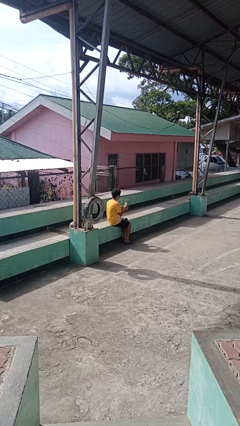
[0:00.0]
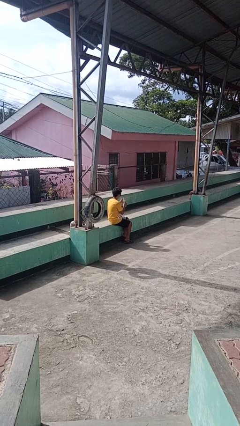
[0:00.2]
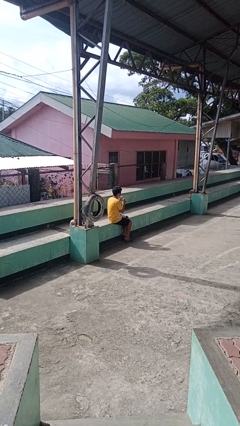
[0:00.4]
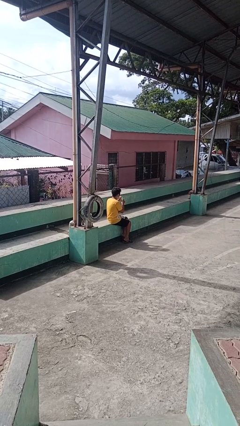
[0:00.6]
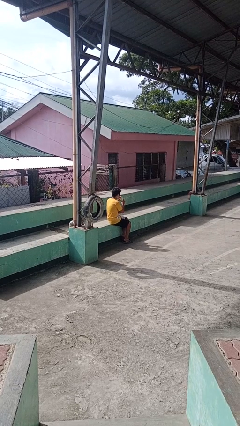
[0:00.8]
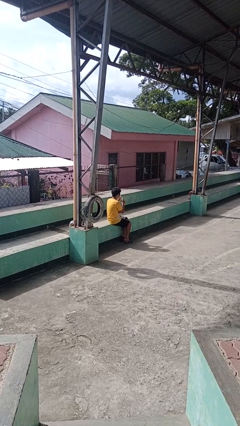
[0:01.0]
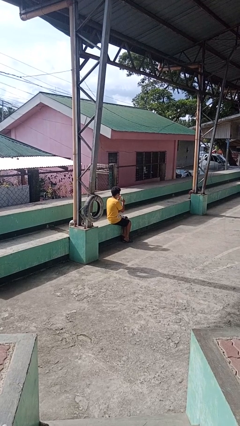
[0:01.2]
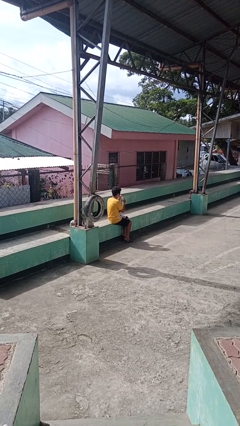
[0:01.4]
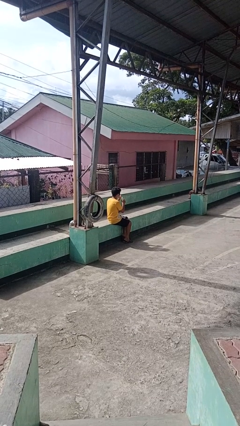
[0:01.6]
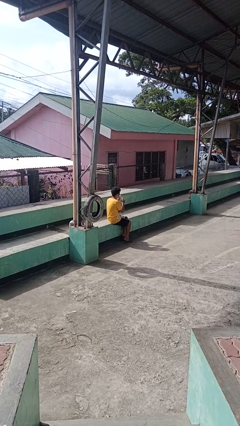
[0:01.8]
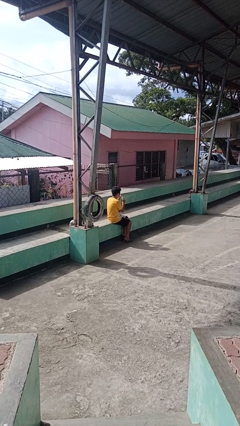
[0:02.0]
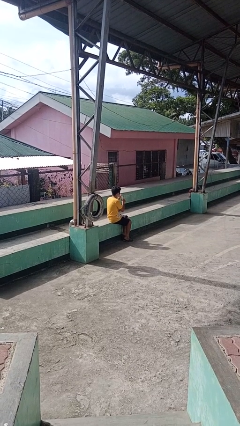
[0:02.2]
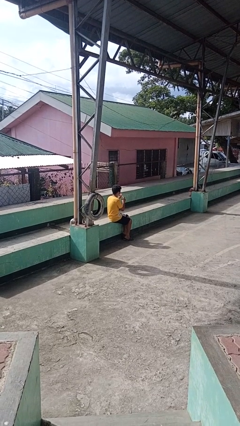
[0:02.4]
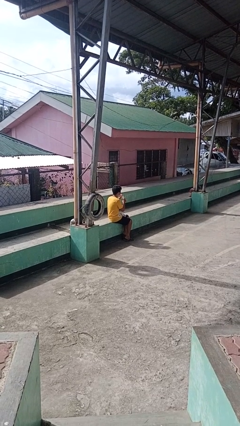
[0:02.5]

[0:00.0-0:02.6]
person drinks from straw

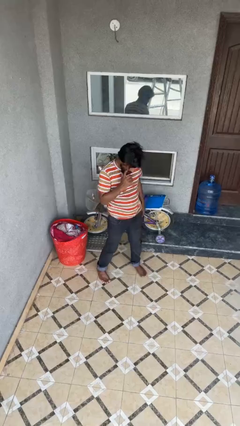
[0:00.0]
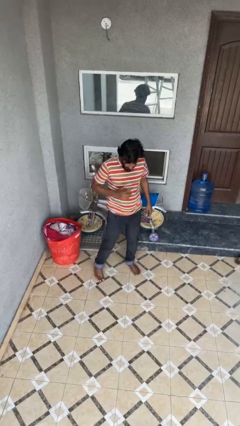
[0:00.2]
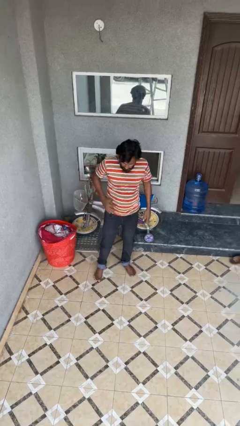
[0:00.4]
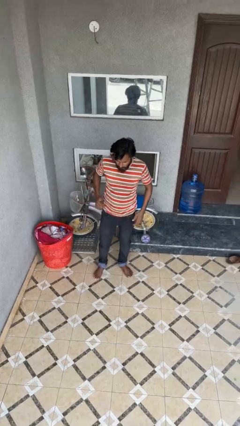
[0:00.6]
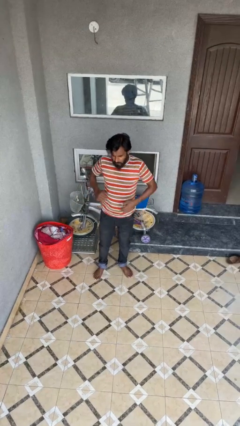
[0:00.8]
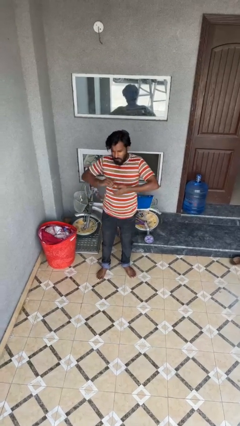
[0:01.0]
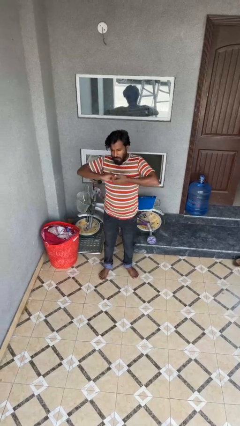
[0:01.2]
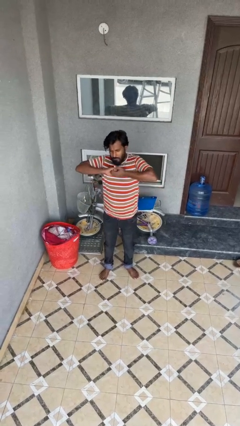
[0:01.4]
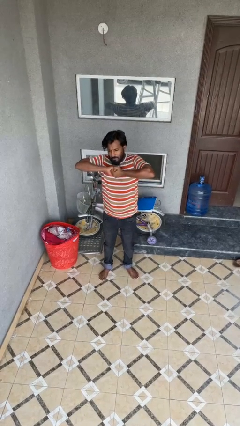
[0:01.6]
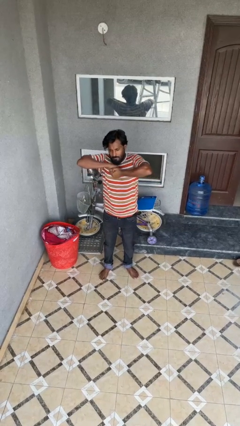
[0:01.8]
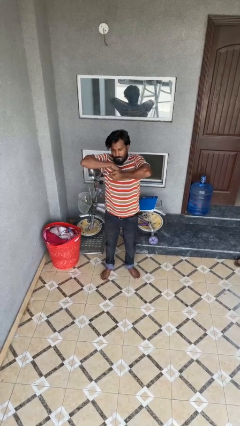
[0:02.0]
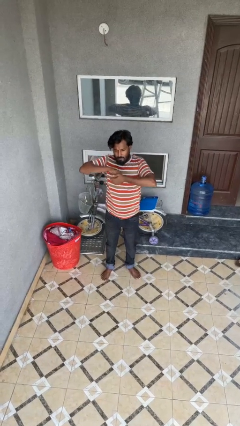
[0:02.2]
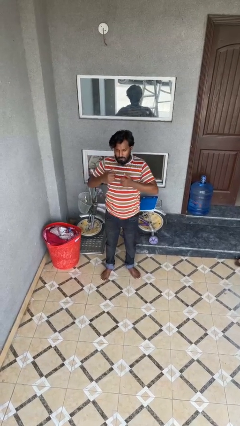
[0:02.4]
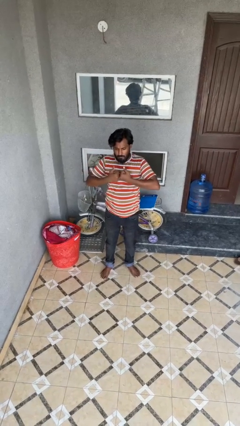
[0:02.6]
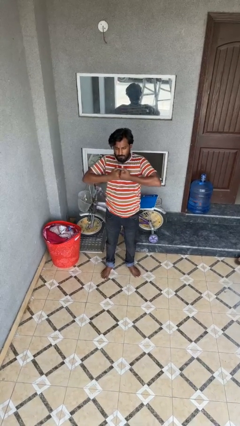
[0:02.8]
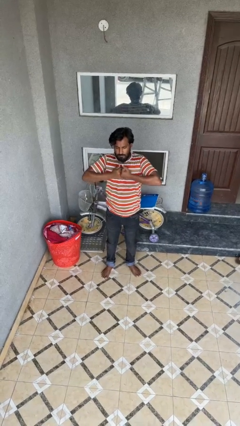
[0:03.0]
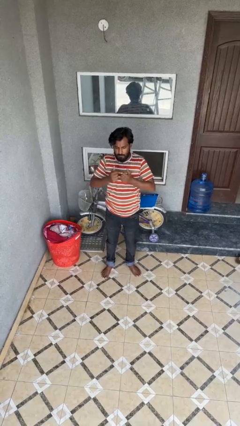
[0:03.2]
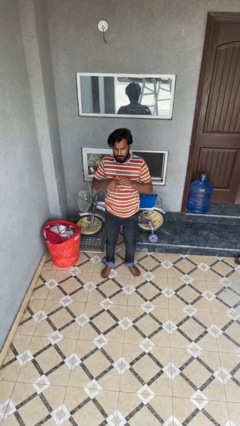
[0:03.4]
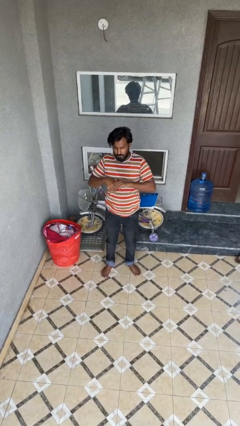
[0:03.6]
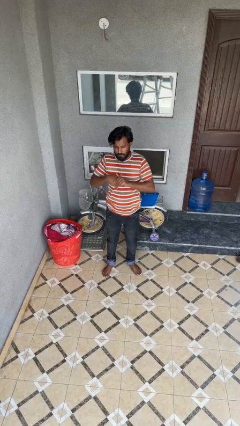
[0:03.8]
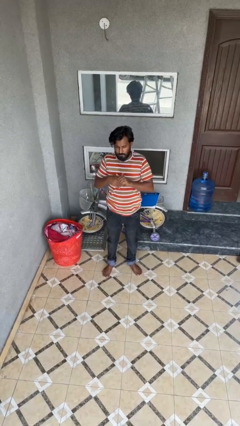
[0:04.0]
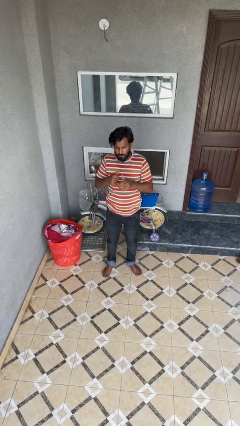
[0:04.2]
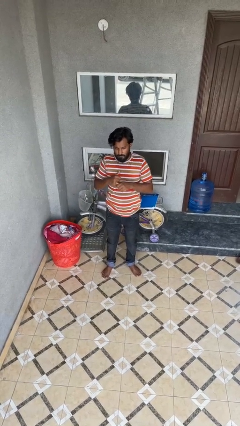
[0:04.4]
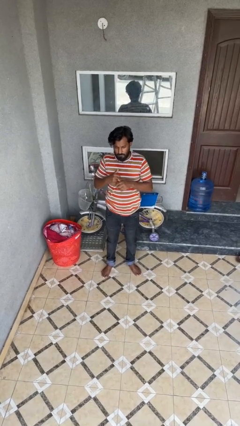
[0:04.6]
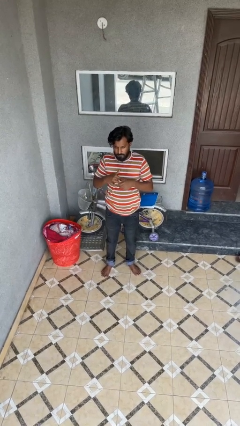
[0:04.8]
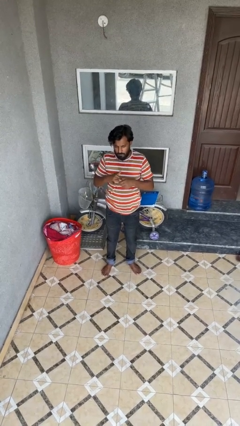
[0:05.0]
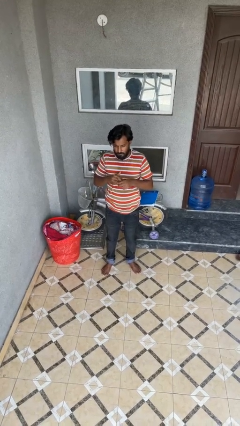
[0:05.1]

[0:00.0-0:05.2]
person cracks knuckles

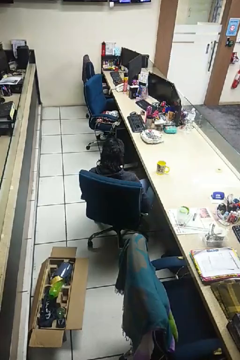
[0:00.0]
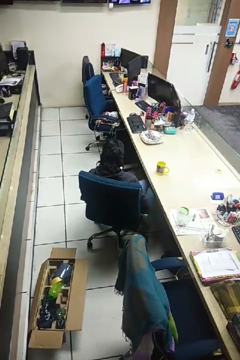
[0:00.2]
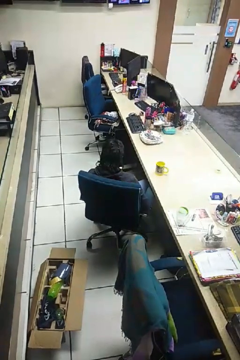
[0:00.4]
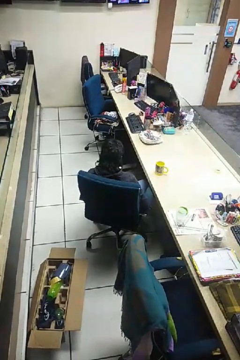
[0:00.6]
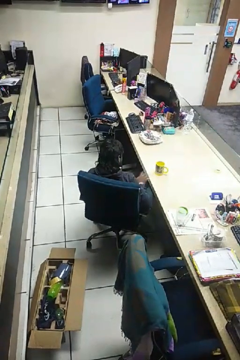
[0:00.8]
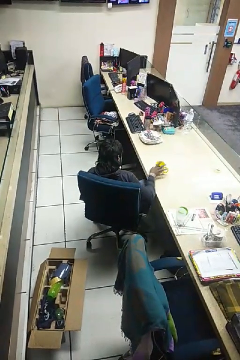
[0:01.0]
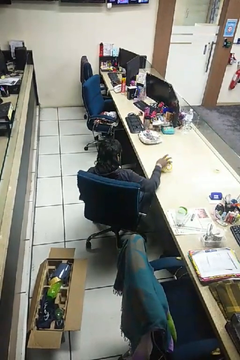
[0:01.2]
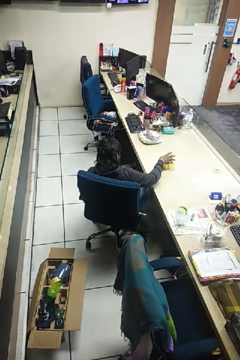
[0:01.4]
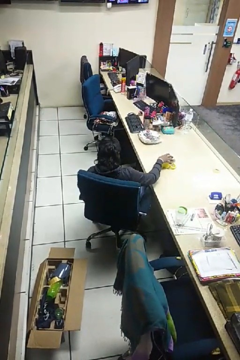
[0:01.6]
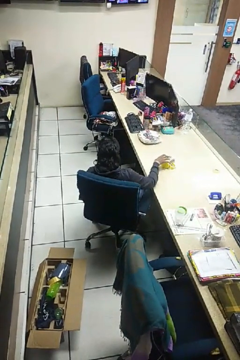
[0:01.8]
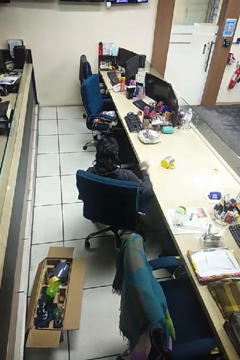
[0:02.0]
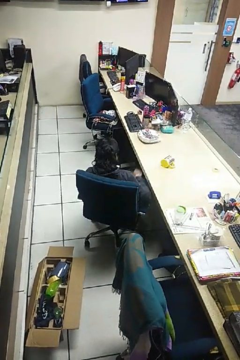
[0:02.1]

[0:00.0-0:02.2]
person knocks over glass

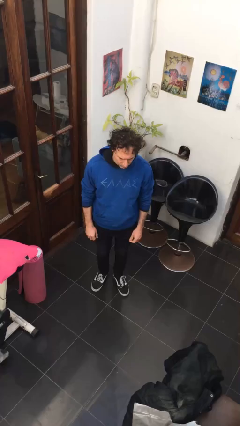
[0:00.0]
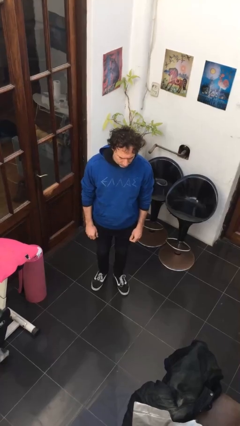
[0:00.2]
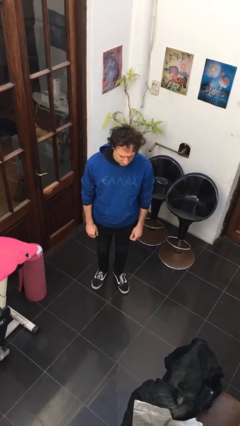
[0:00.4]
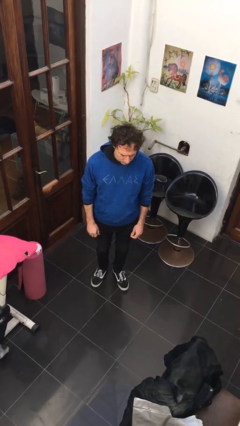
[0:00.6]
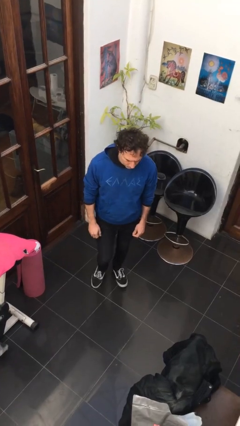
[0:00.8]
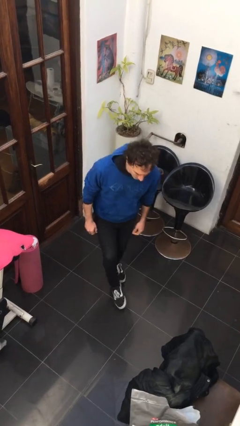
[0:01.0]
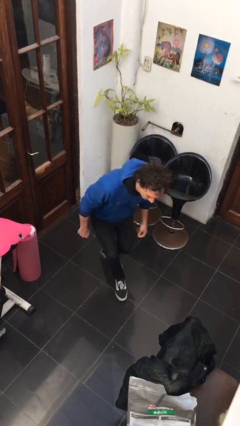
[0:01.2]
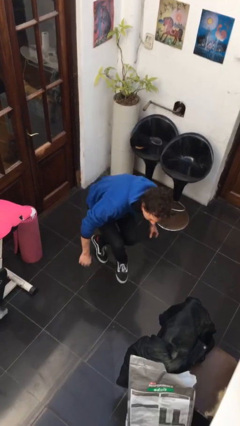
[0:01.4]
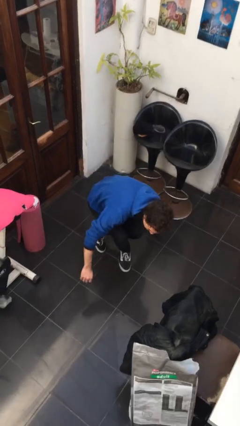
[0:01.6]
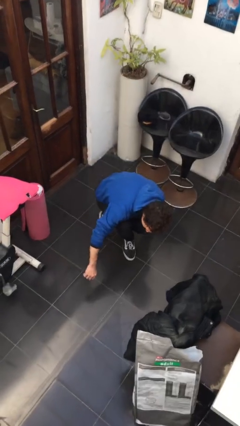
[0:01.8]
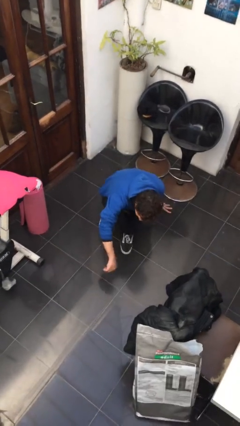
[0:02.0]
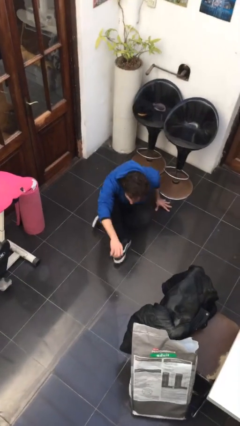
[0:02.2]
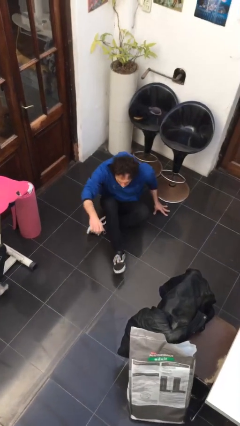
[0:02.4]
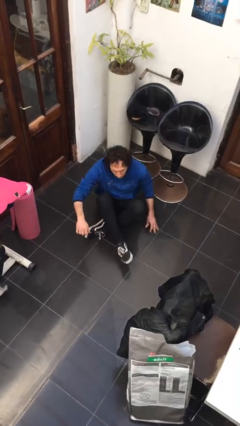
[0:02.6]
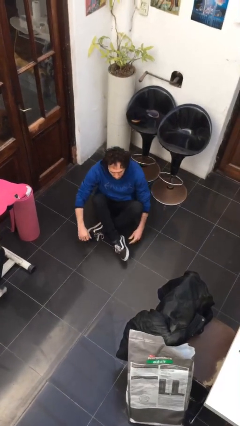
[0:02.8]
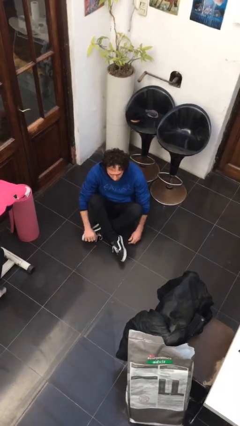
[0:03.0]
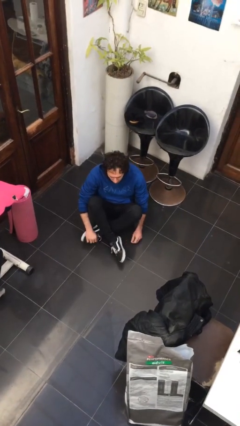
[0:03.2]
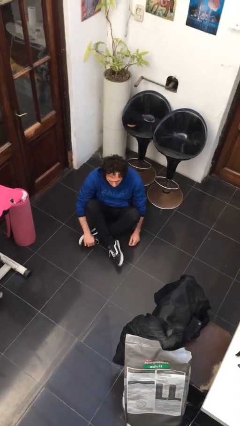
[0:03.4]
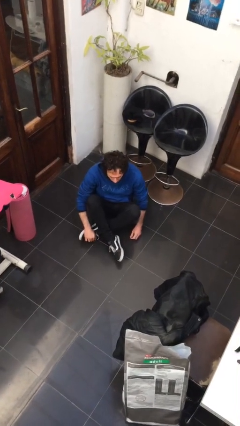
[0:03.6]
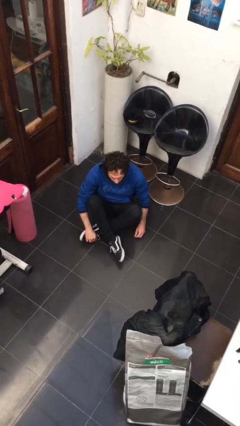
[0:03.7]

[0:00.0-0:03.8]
person sits crisscross

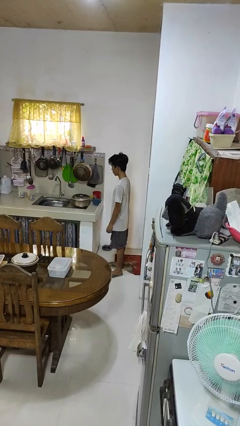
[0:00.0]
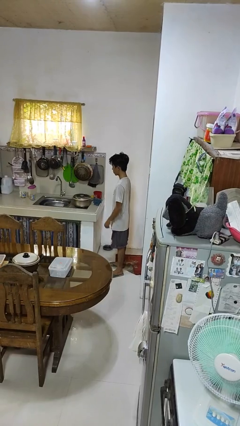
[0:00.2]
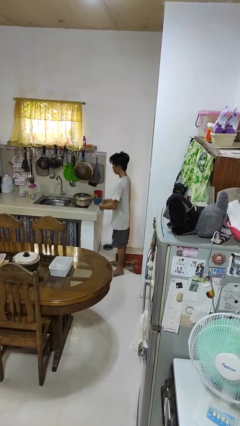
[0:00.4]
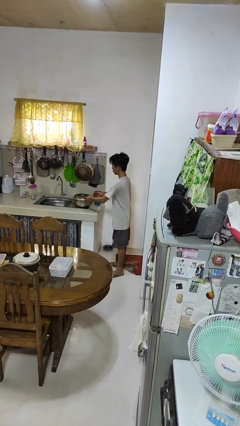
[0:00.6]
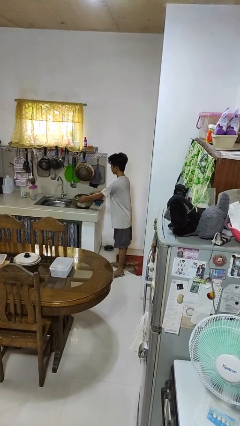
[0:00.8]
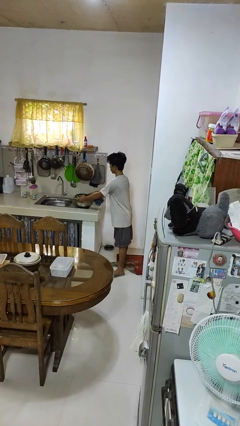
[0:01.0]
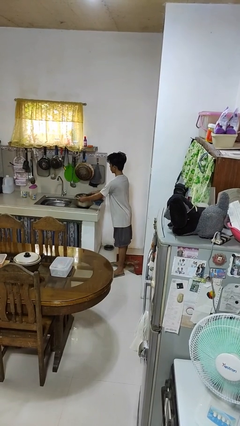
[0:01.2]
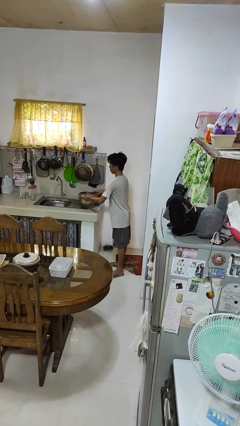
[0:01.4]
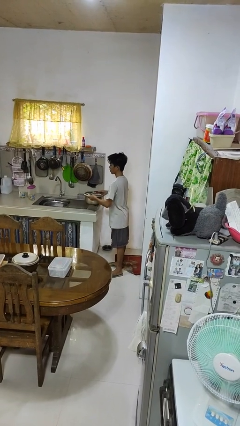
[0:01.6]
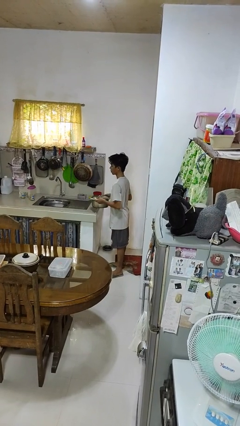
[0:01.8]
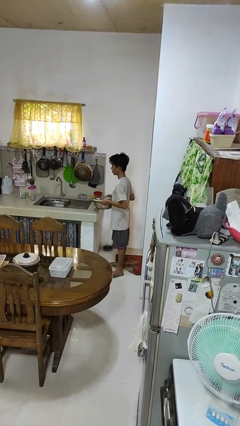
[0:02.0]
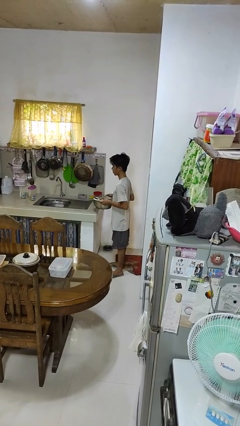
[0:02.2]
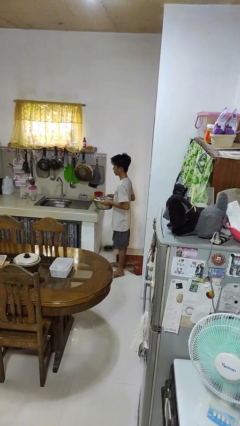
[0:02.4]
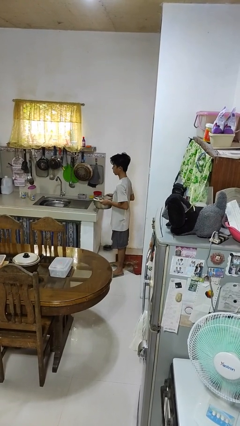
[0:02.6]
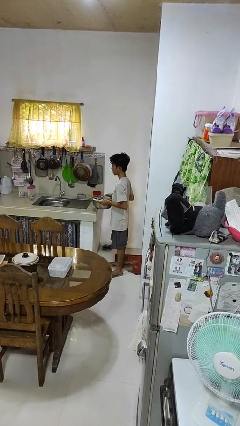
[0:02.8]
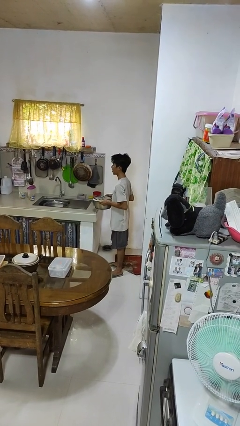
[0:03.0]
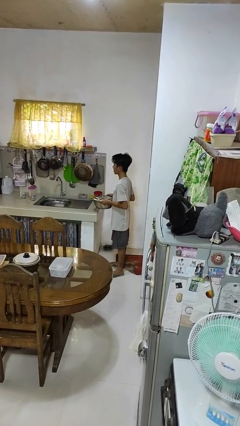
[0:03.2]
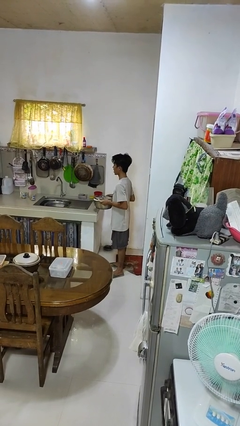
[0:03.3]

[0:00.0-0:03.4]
person picks up object from countertop

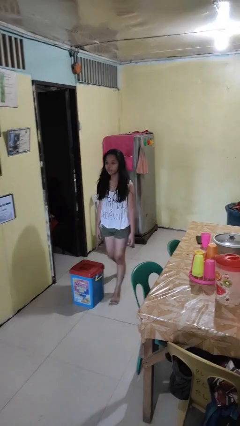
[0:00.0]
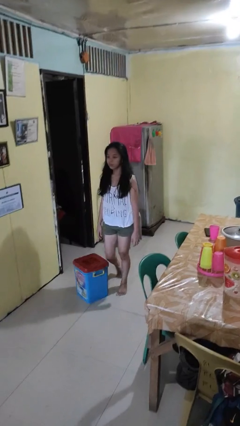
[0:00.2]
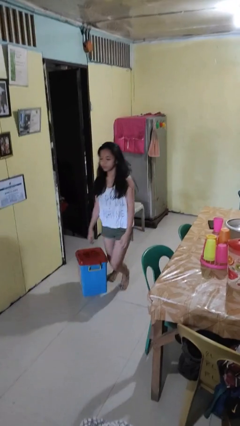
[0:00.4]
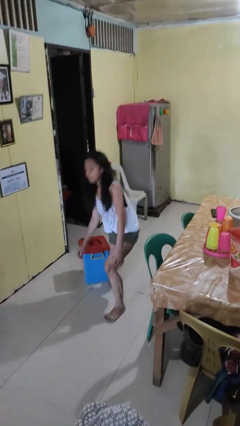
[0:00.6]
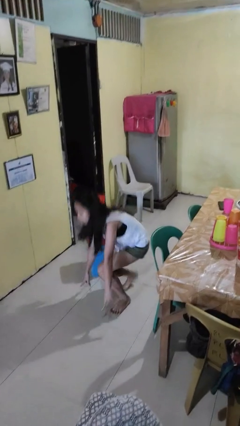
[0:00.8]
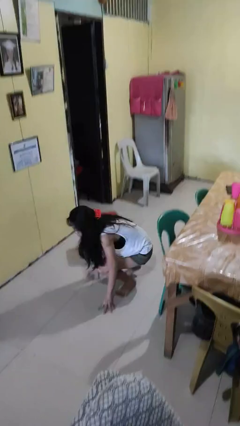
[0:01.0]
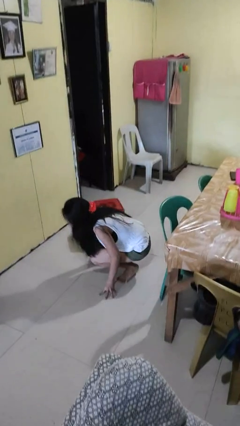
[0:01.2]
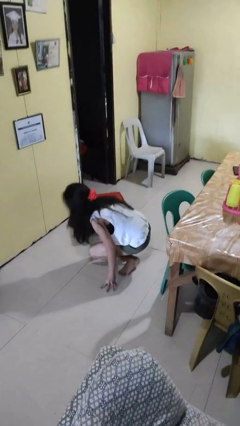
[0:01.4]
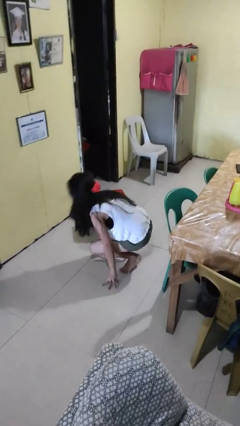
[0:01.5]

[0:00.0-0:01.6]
person trips on object on floor
